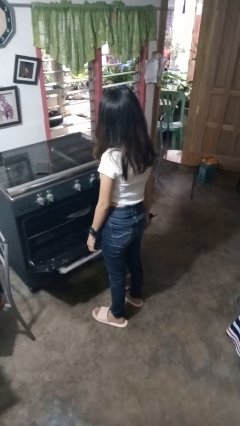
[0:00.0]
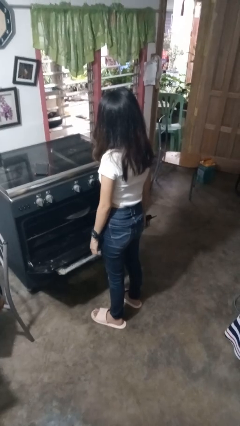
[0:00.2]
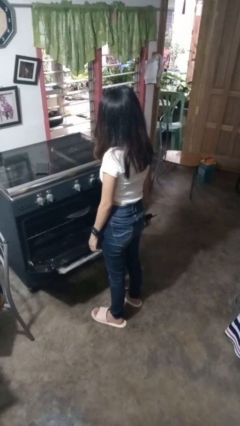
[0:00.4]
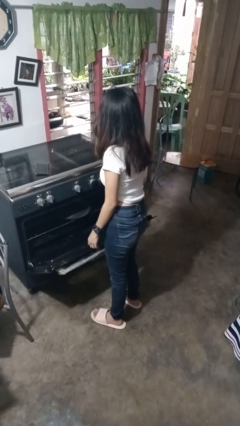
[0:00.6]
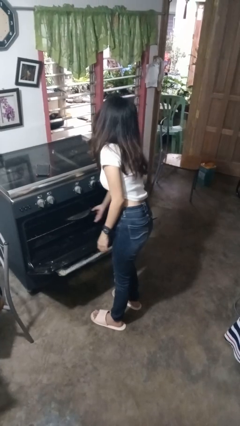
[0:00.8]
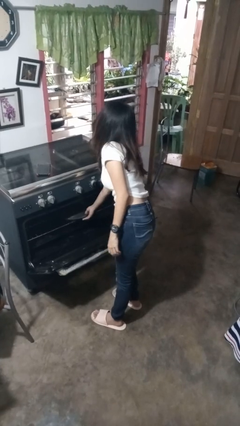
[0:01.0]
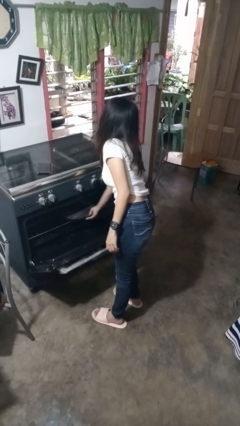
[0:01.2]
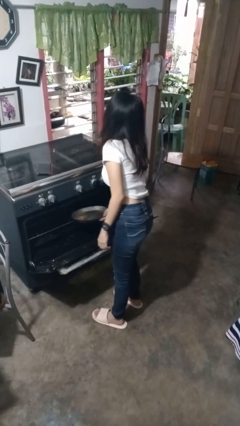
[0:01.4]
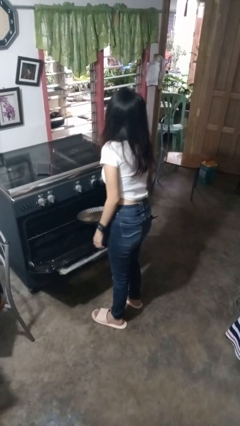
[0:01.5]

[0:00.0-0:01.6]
person takes object from oven

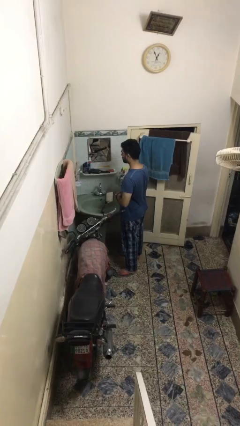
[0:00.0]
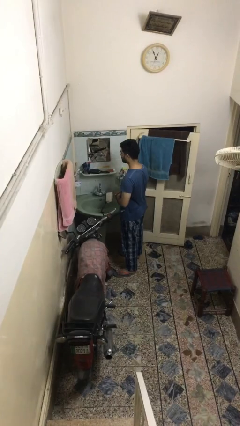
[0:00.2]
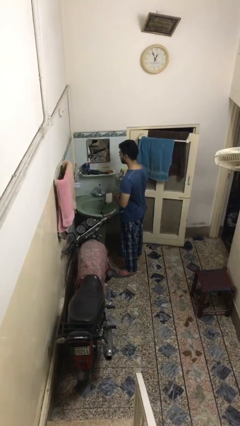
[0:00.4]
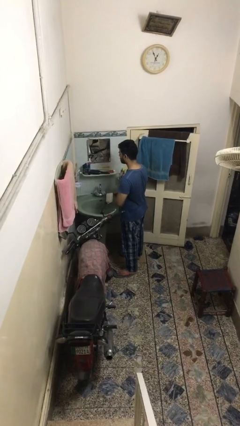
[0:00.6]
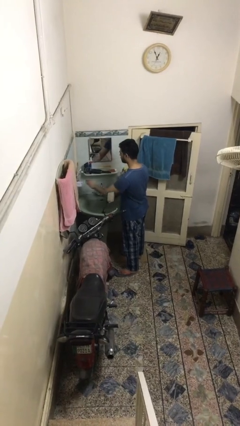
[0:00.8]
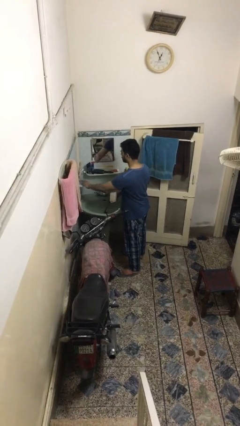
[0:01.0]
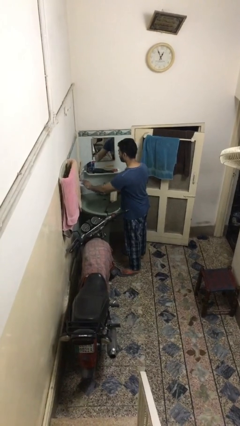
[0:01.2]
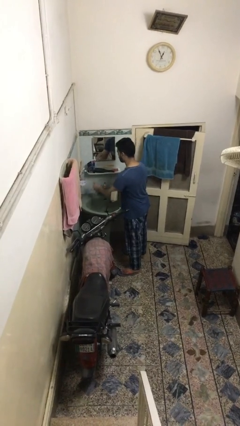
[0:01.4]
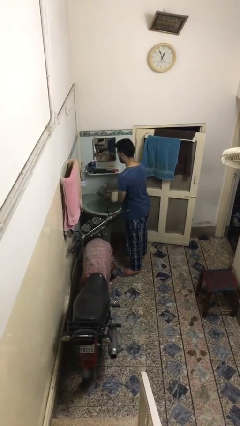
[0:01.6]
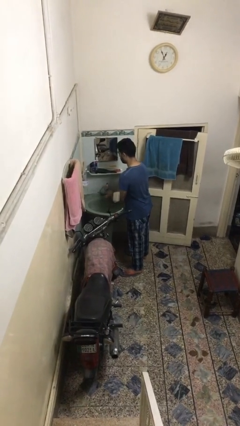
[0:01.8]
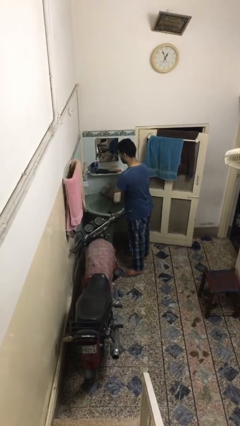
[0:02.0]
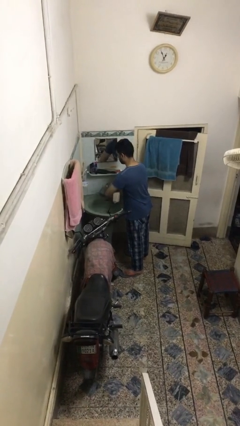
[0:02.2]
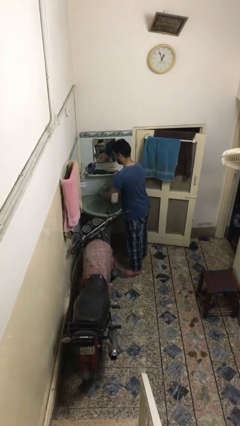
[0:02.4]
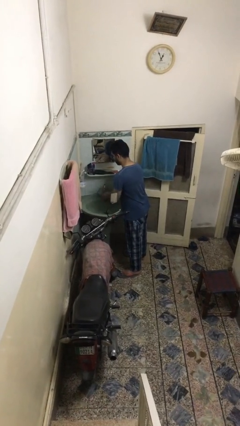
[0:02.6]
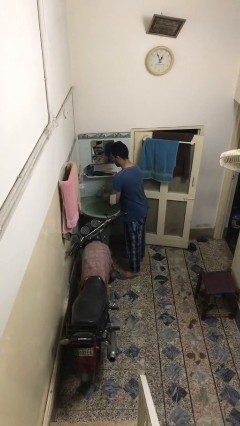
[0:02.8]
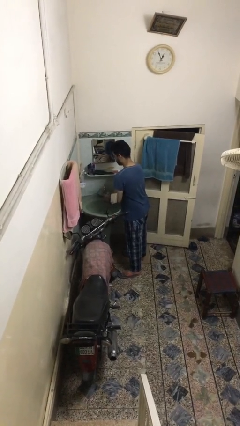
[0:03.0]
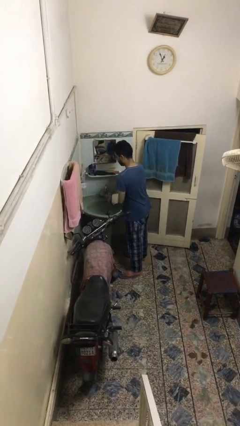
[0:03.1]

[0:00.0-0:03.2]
person washes hands

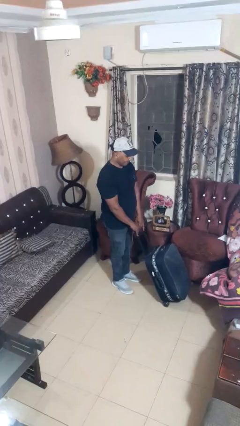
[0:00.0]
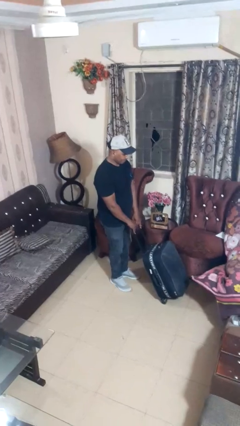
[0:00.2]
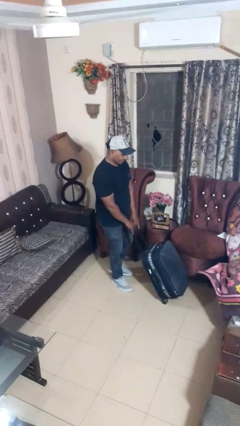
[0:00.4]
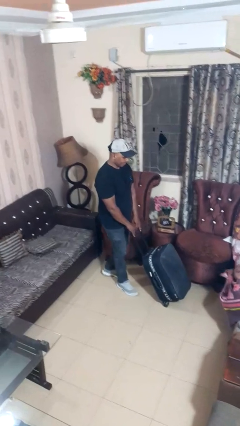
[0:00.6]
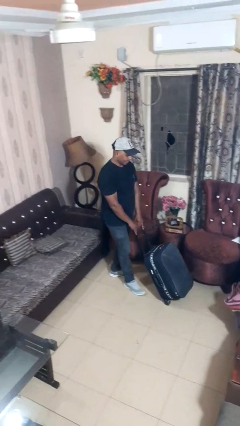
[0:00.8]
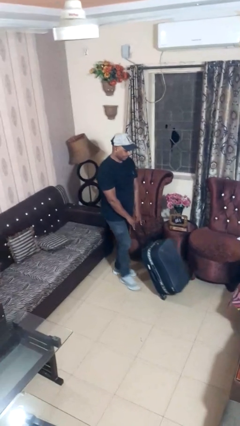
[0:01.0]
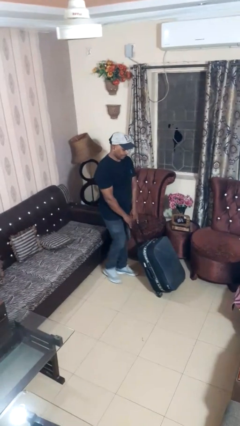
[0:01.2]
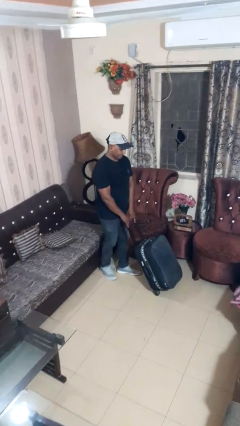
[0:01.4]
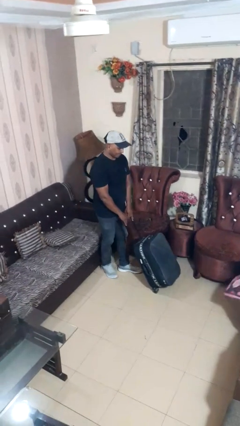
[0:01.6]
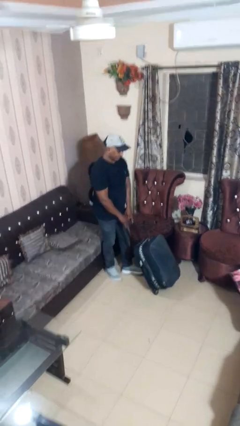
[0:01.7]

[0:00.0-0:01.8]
person pulls wheeled cart

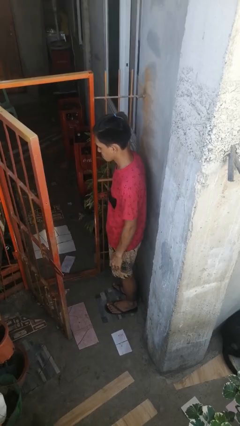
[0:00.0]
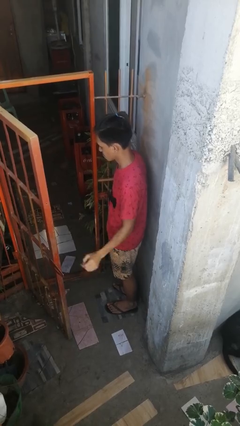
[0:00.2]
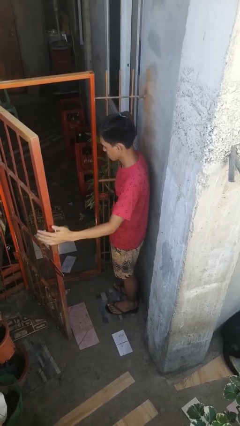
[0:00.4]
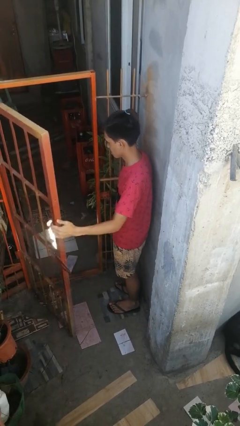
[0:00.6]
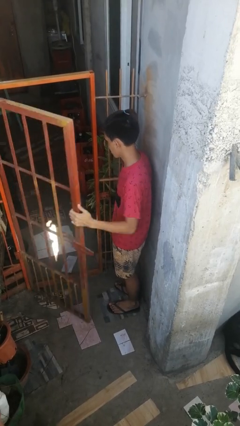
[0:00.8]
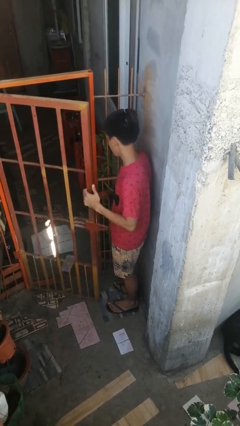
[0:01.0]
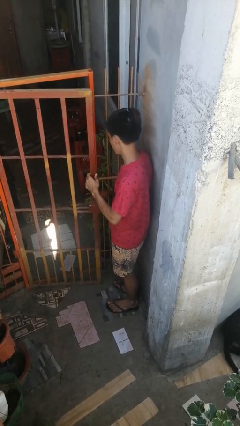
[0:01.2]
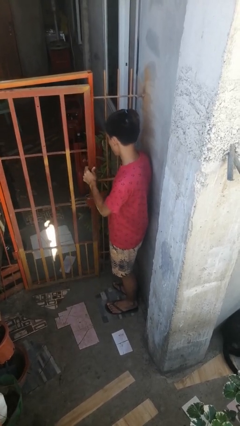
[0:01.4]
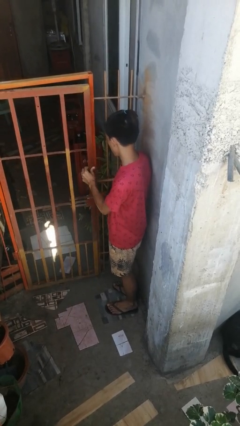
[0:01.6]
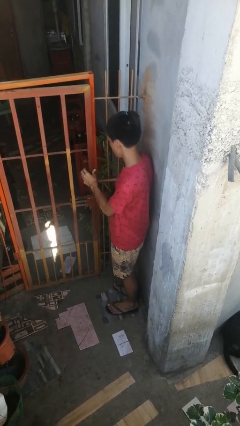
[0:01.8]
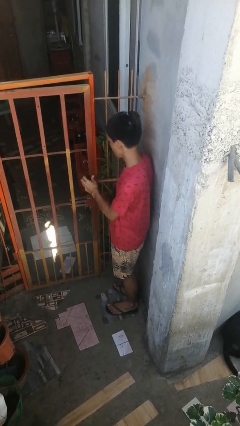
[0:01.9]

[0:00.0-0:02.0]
person closes gate

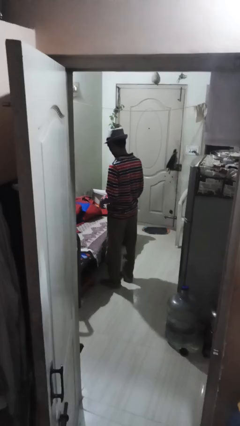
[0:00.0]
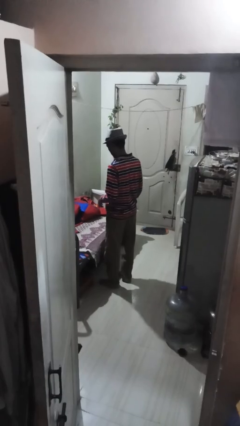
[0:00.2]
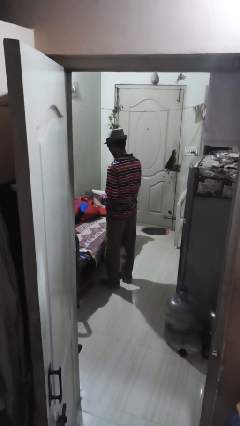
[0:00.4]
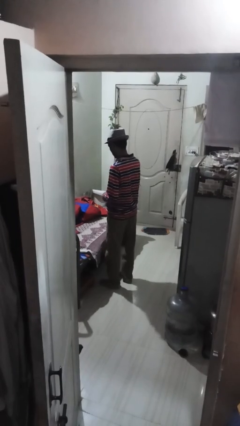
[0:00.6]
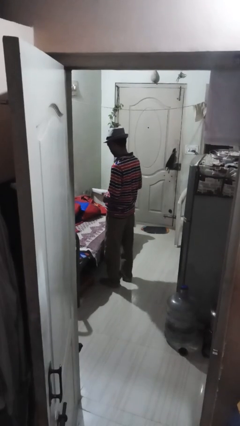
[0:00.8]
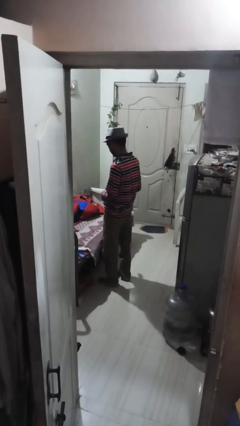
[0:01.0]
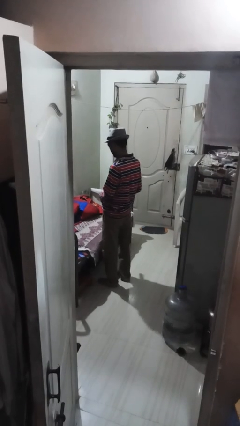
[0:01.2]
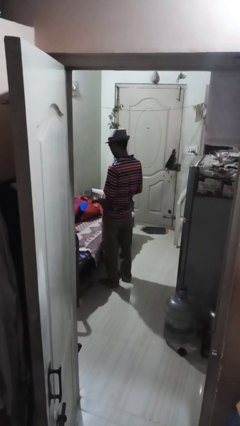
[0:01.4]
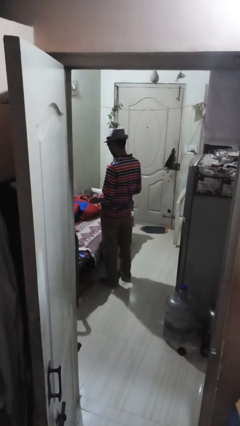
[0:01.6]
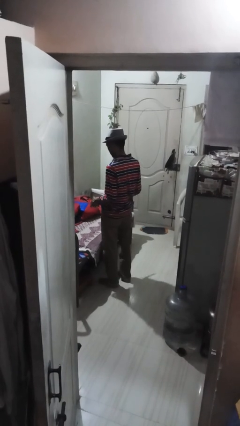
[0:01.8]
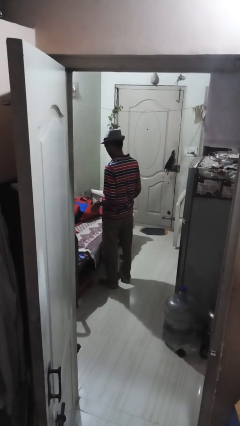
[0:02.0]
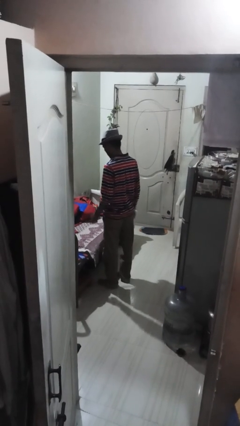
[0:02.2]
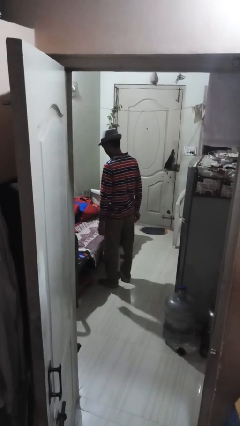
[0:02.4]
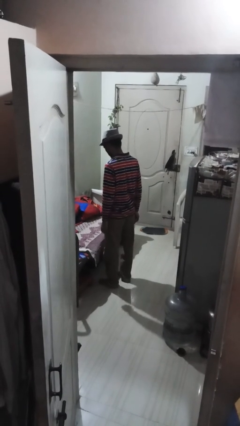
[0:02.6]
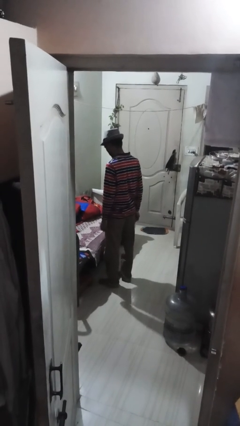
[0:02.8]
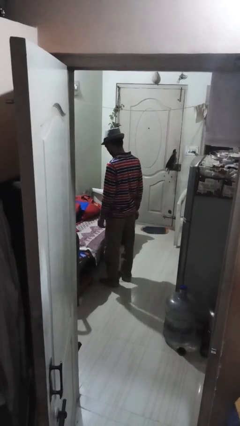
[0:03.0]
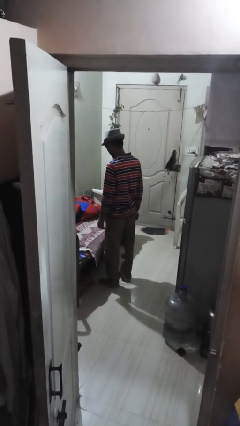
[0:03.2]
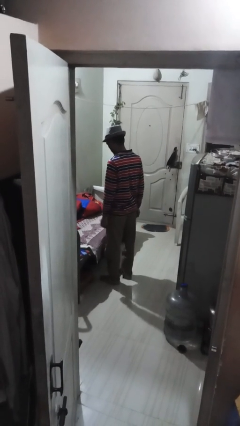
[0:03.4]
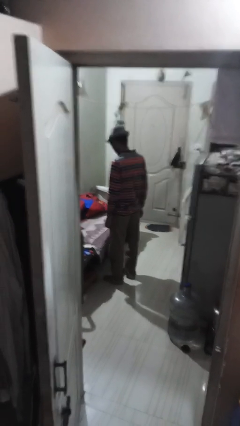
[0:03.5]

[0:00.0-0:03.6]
person takes off belt

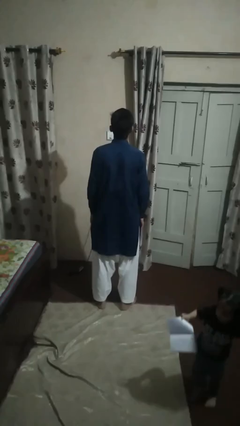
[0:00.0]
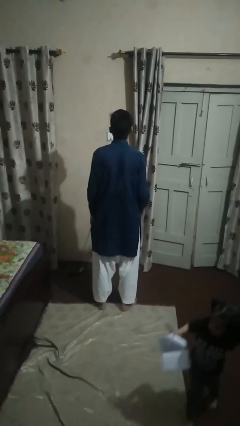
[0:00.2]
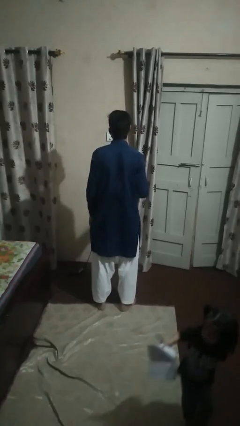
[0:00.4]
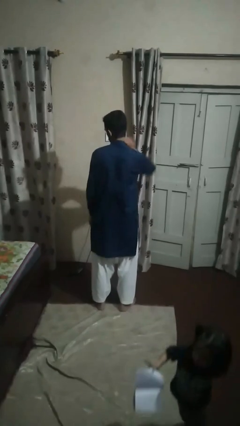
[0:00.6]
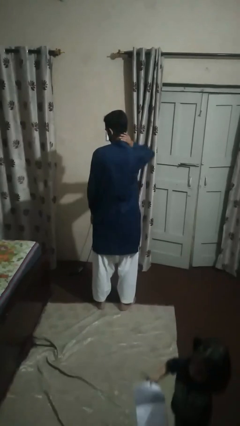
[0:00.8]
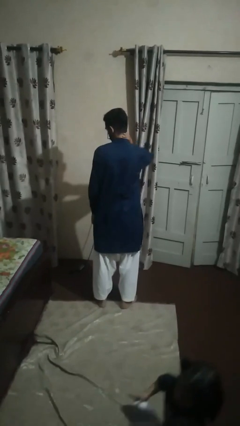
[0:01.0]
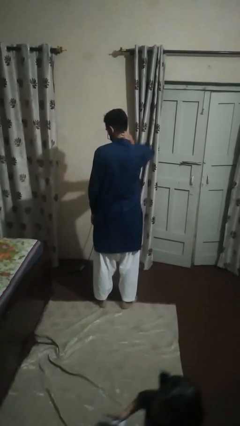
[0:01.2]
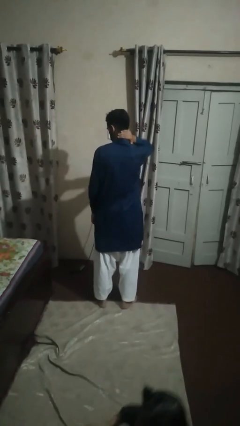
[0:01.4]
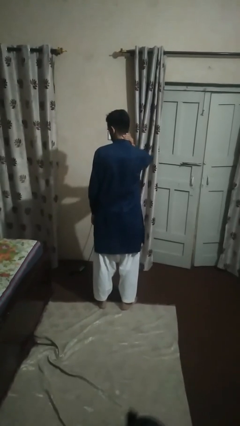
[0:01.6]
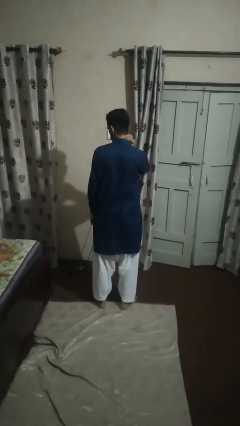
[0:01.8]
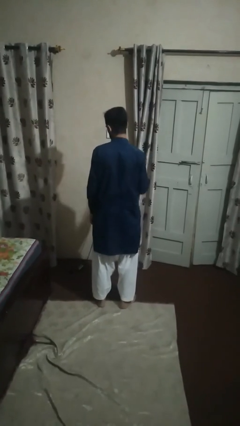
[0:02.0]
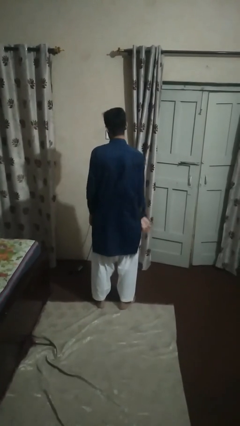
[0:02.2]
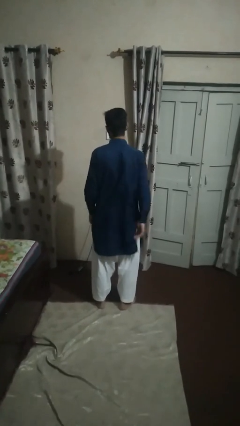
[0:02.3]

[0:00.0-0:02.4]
person rubs neck

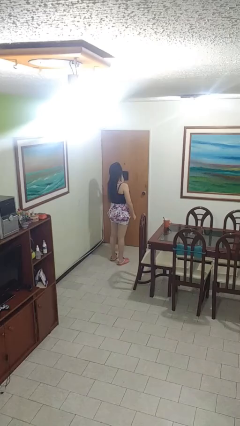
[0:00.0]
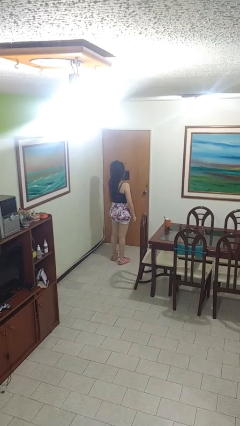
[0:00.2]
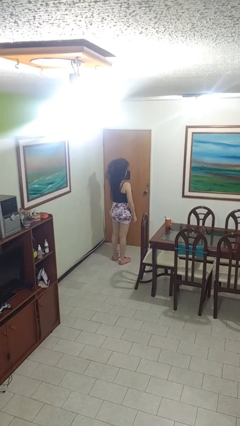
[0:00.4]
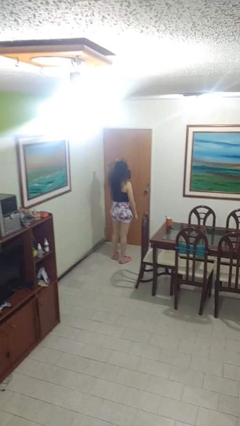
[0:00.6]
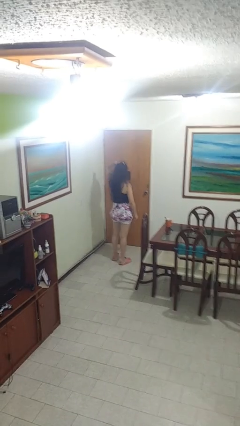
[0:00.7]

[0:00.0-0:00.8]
person strokes hair

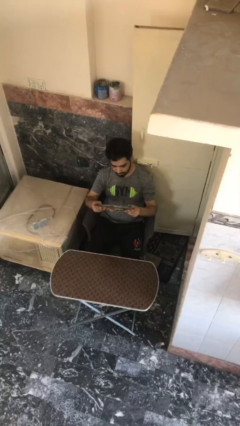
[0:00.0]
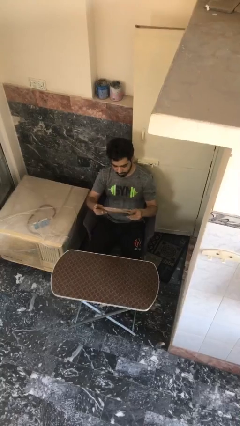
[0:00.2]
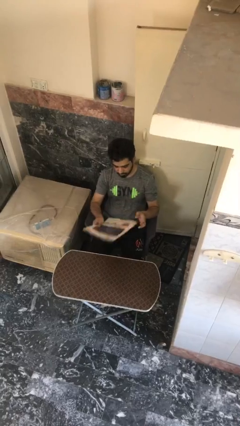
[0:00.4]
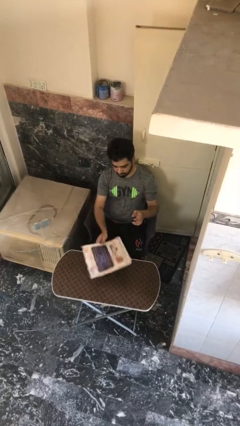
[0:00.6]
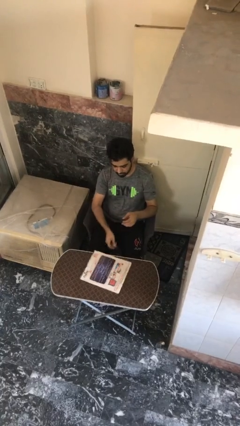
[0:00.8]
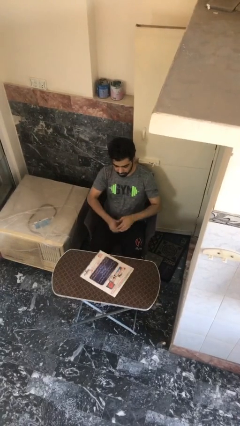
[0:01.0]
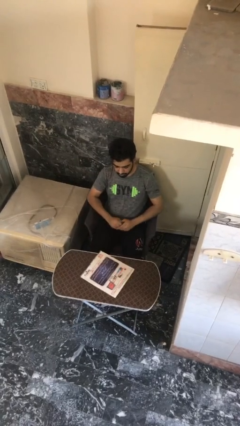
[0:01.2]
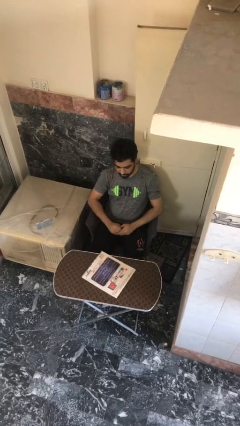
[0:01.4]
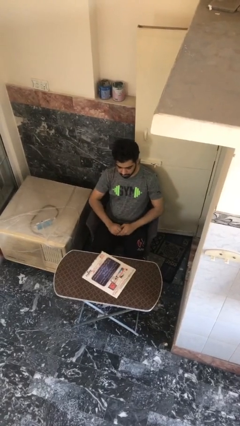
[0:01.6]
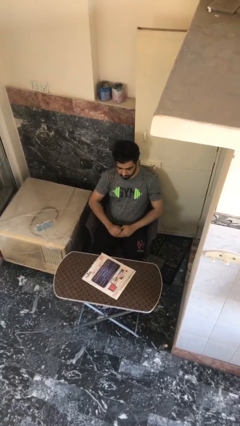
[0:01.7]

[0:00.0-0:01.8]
person puts down object on table
